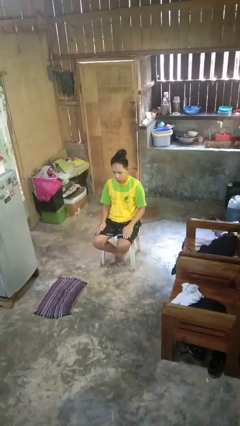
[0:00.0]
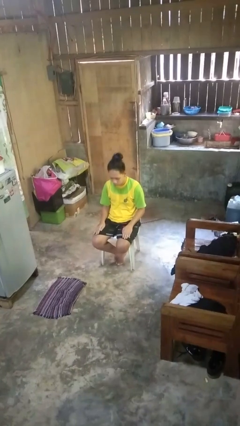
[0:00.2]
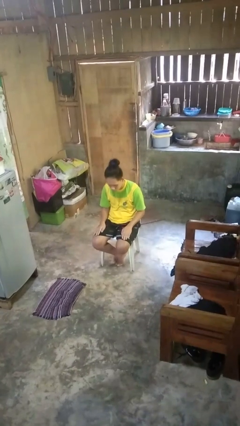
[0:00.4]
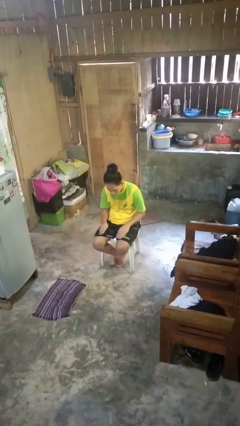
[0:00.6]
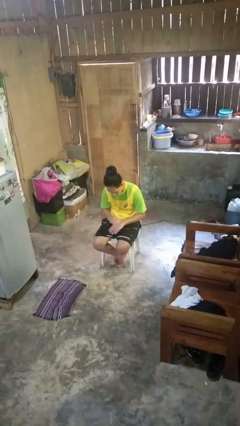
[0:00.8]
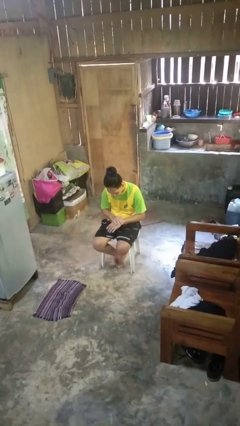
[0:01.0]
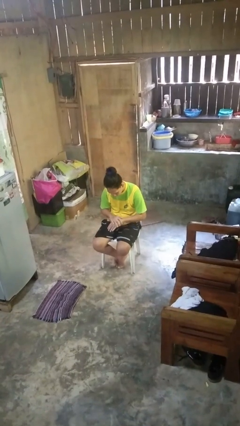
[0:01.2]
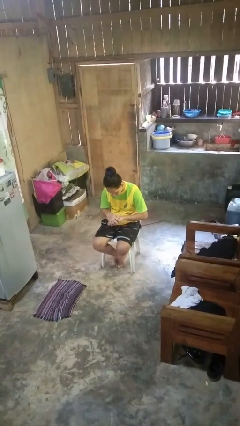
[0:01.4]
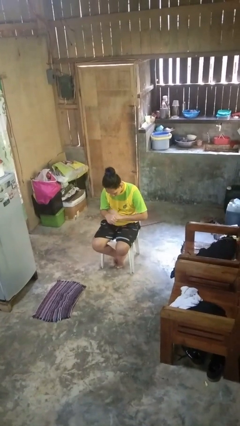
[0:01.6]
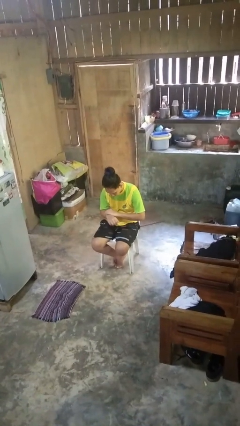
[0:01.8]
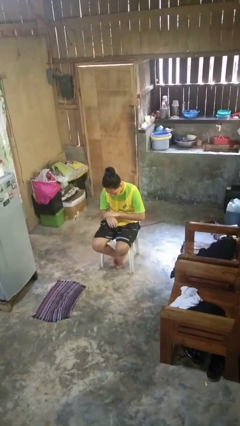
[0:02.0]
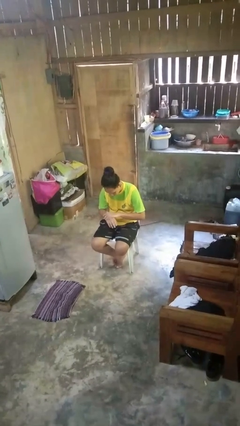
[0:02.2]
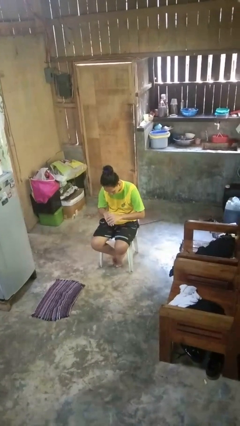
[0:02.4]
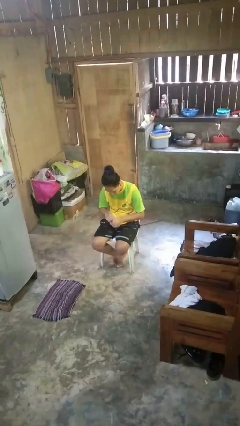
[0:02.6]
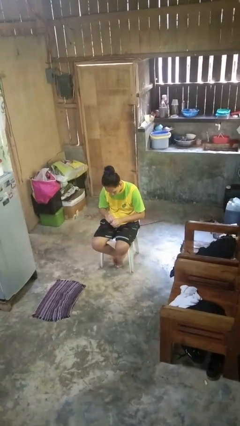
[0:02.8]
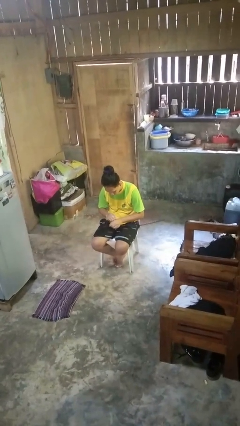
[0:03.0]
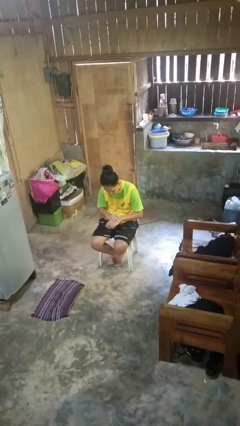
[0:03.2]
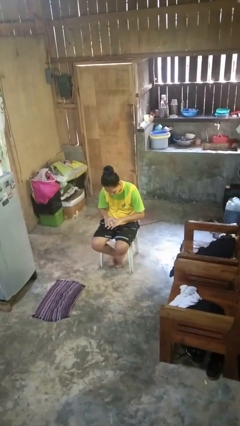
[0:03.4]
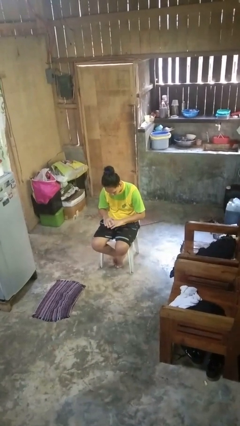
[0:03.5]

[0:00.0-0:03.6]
person looks at hands in lap

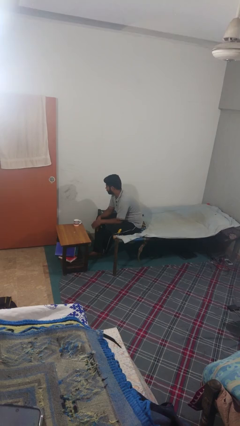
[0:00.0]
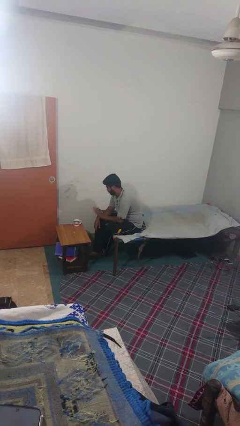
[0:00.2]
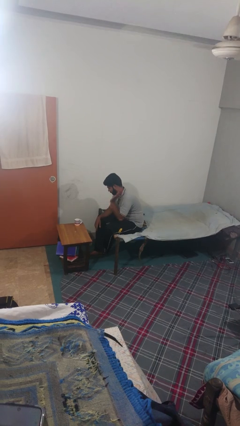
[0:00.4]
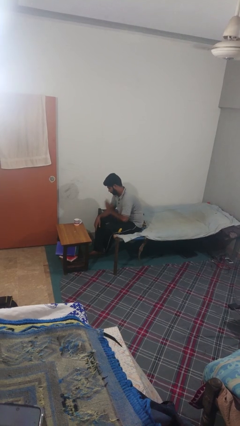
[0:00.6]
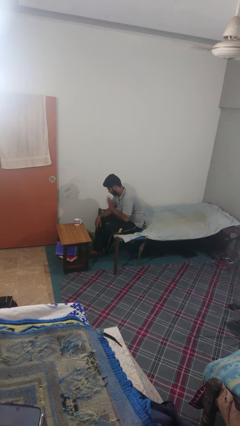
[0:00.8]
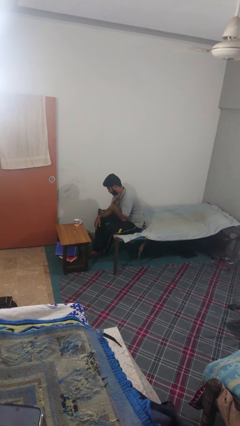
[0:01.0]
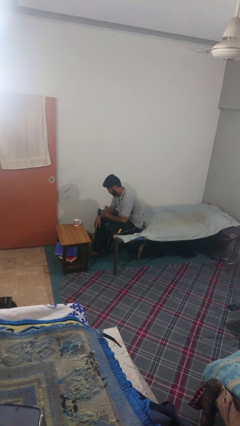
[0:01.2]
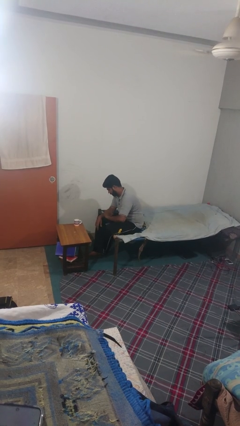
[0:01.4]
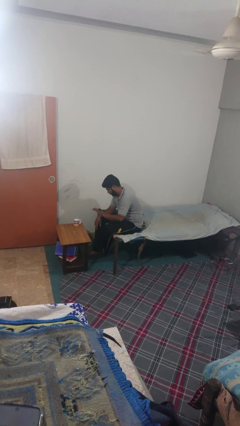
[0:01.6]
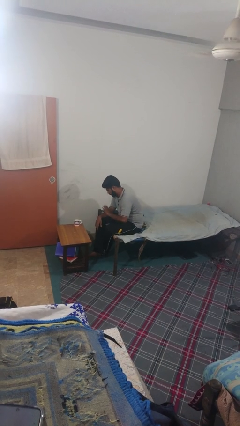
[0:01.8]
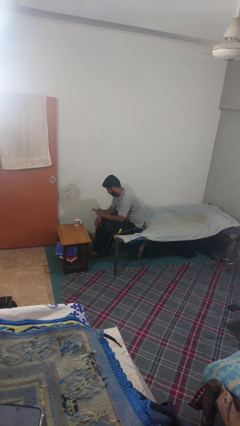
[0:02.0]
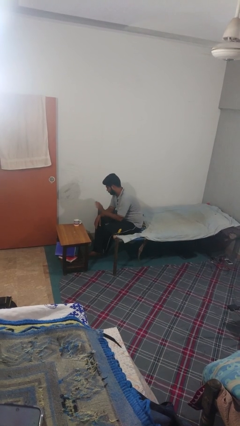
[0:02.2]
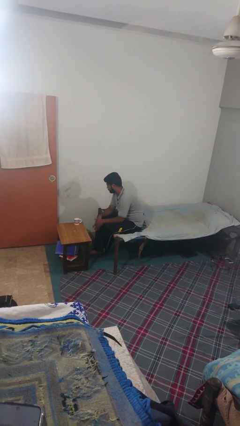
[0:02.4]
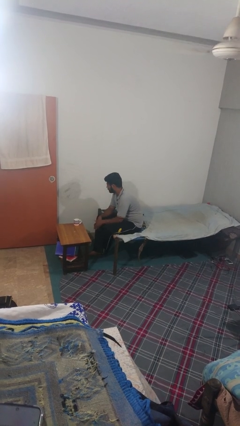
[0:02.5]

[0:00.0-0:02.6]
person swats bug

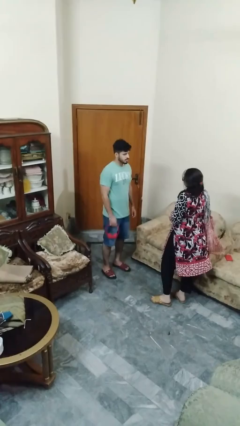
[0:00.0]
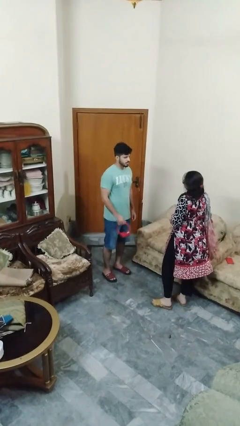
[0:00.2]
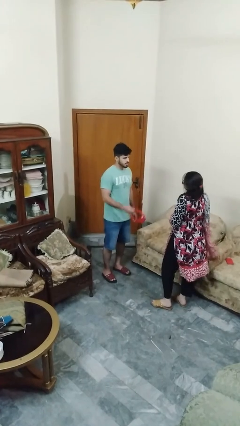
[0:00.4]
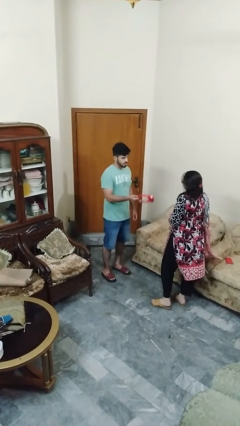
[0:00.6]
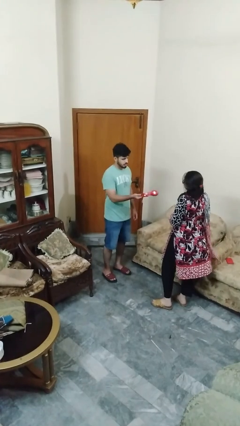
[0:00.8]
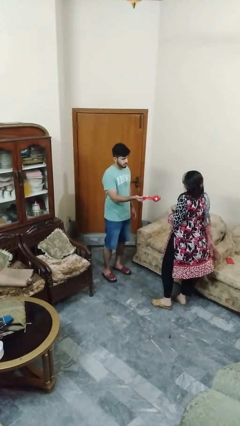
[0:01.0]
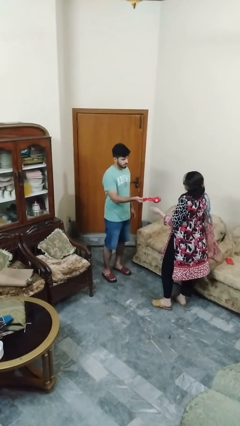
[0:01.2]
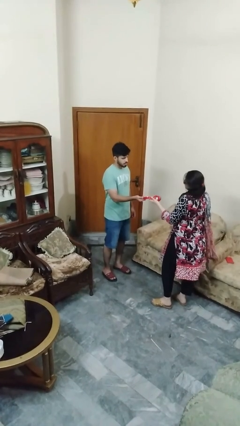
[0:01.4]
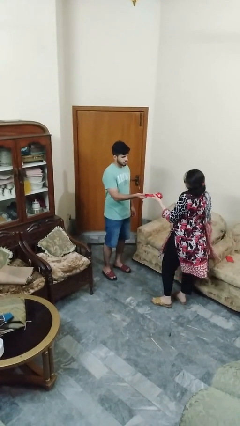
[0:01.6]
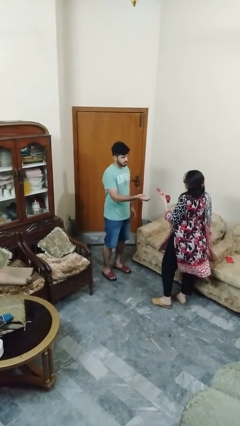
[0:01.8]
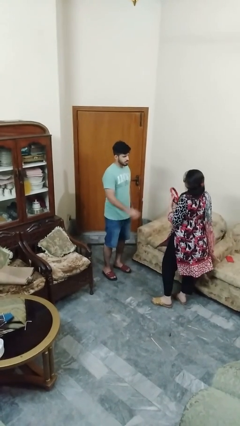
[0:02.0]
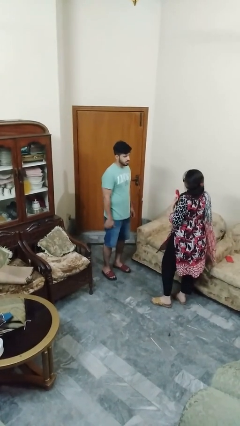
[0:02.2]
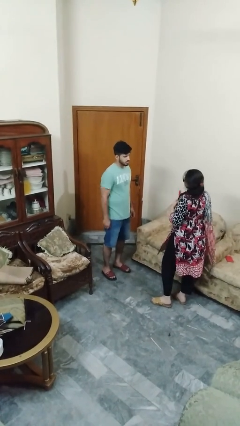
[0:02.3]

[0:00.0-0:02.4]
person transfers object to person

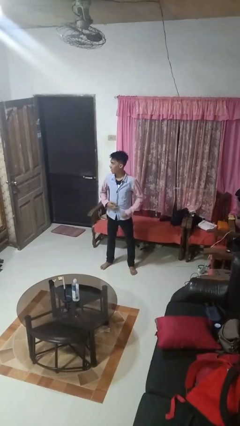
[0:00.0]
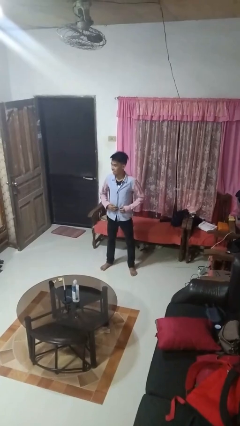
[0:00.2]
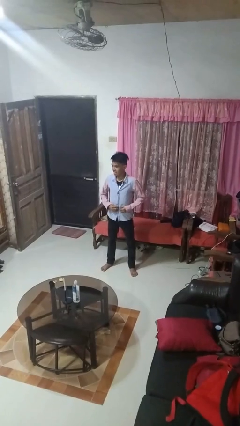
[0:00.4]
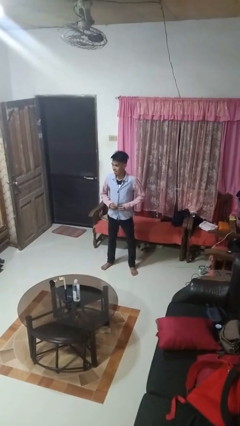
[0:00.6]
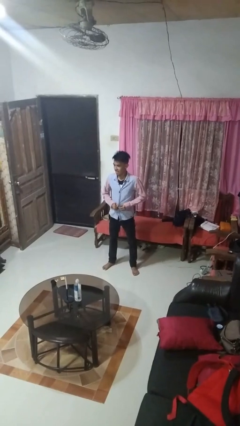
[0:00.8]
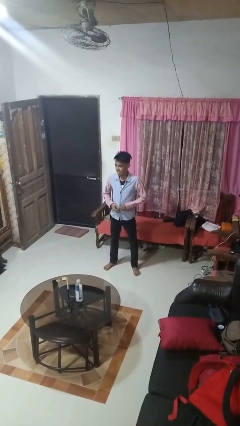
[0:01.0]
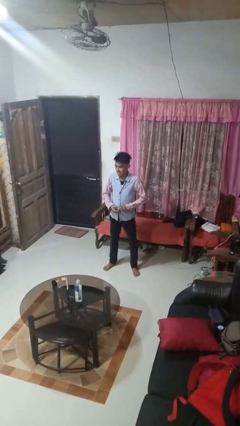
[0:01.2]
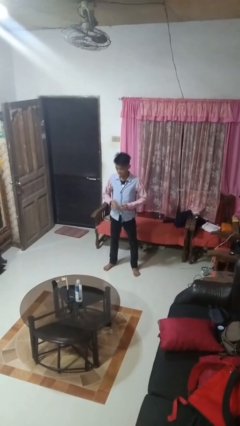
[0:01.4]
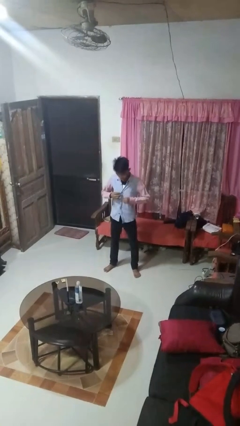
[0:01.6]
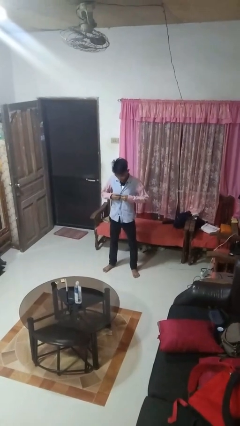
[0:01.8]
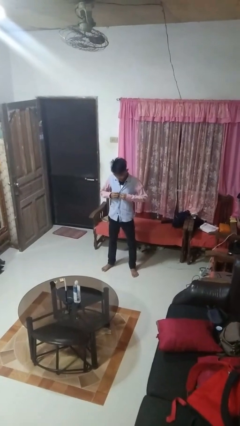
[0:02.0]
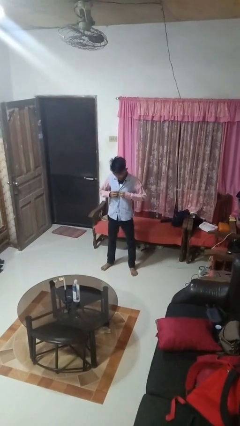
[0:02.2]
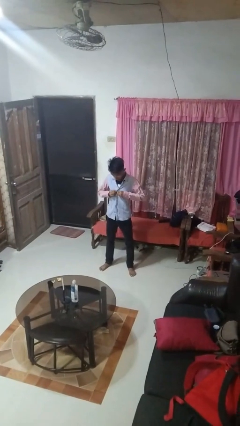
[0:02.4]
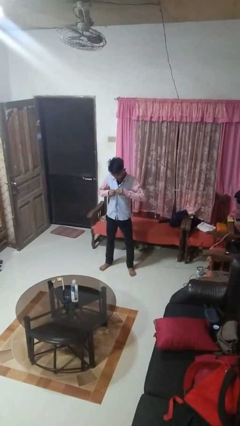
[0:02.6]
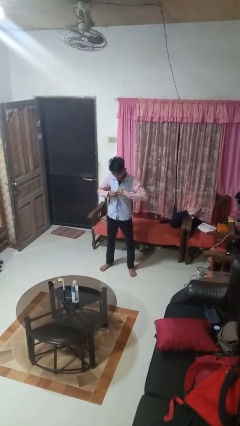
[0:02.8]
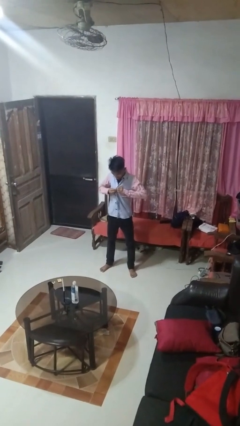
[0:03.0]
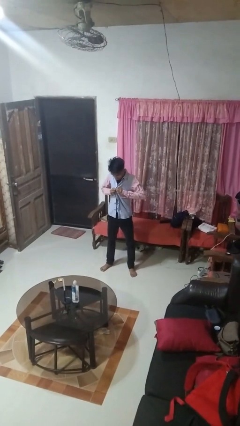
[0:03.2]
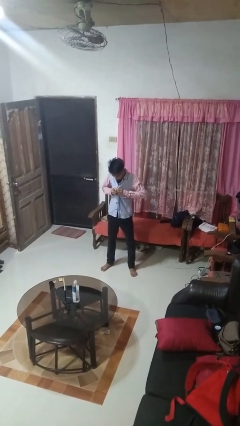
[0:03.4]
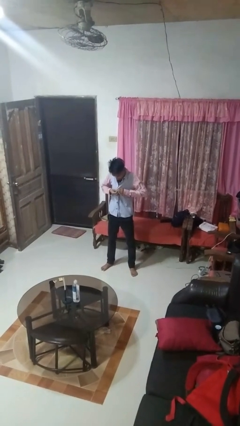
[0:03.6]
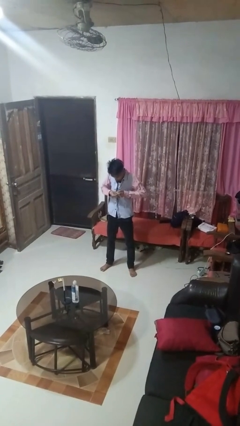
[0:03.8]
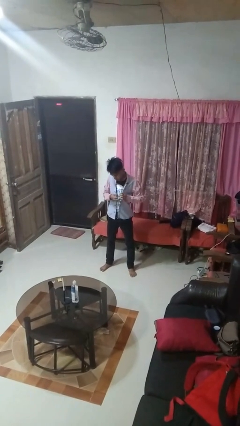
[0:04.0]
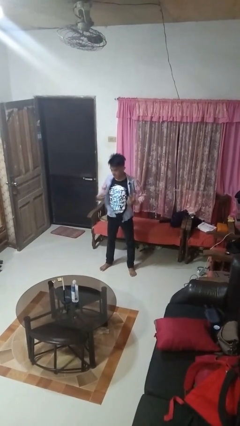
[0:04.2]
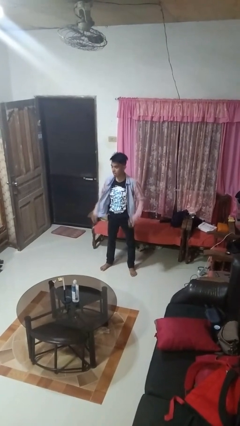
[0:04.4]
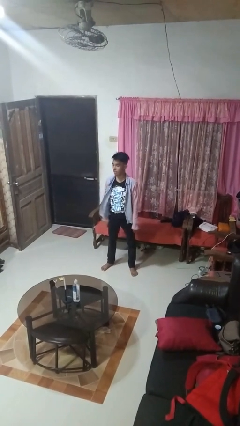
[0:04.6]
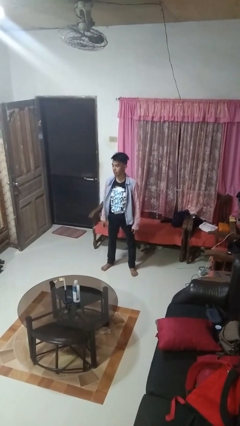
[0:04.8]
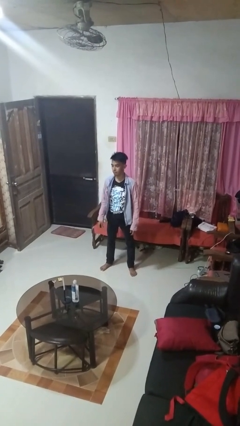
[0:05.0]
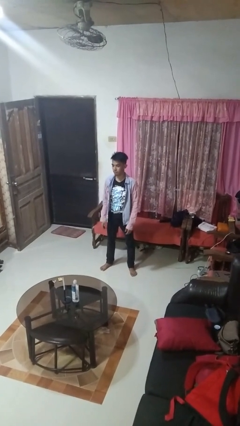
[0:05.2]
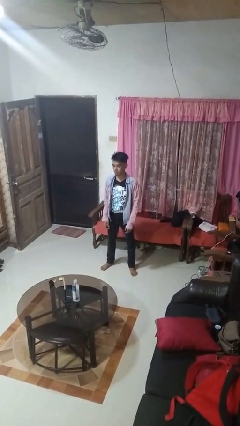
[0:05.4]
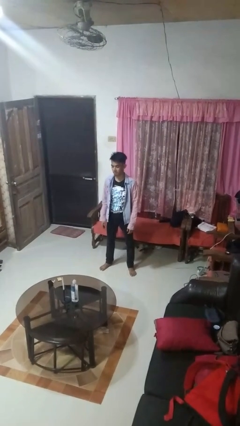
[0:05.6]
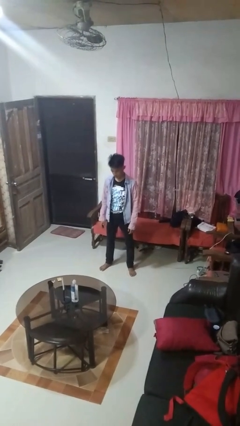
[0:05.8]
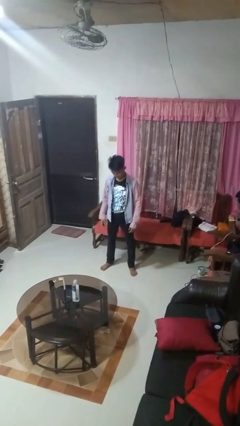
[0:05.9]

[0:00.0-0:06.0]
person unbuttons shirt

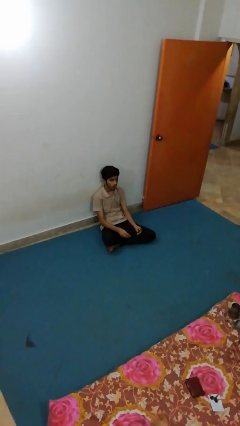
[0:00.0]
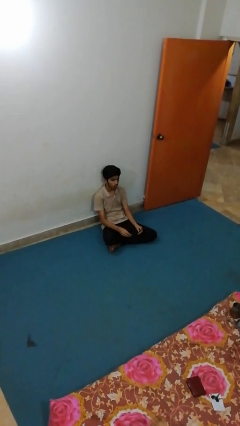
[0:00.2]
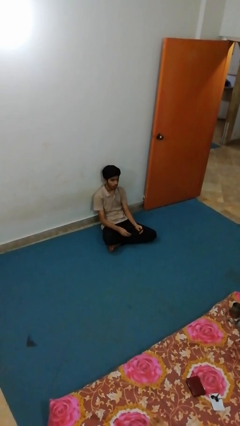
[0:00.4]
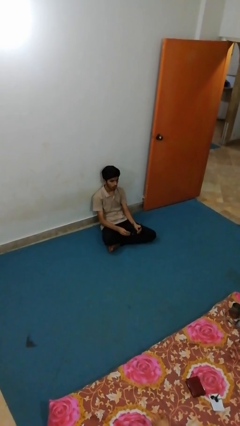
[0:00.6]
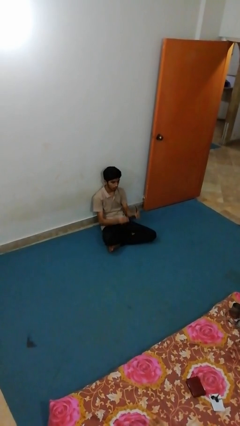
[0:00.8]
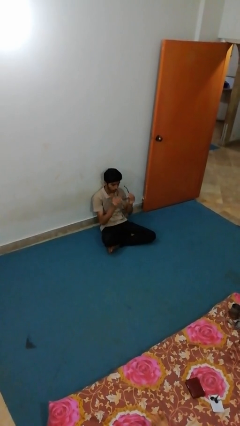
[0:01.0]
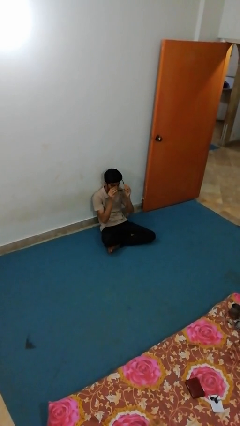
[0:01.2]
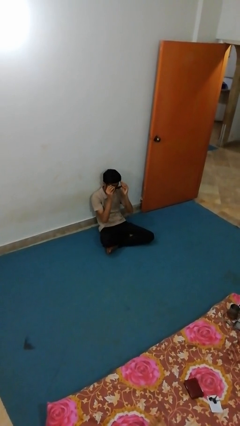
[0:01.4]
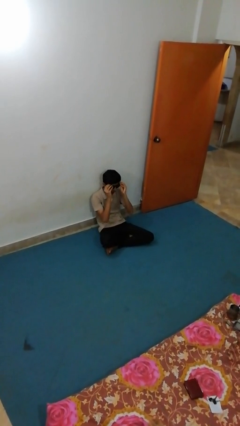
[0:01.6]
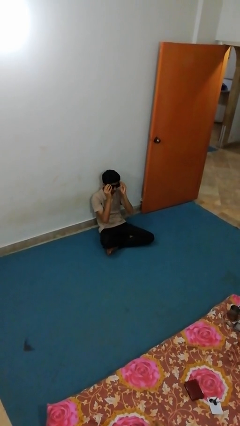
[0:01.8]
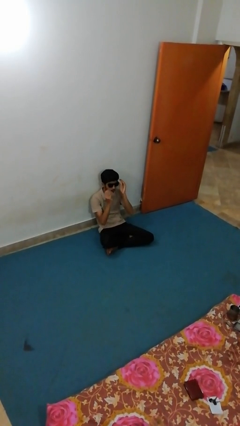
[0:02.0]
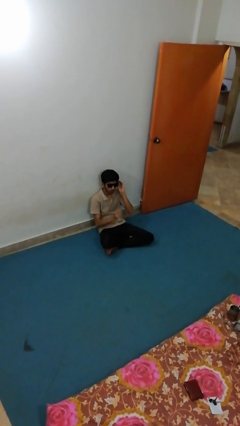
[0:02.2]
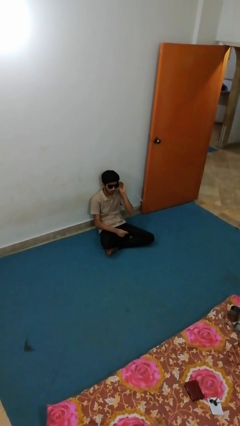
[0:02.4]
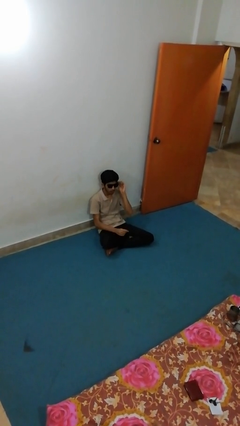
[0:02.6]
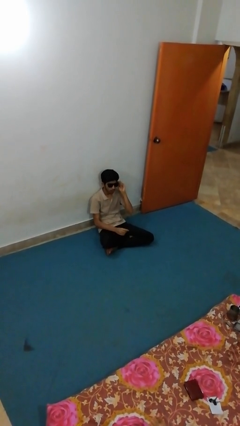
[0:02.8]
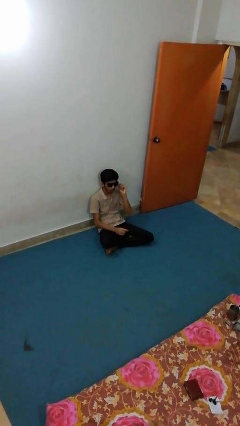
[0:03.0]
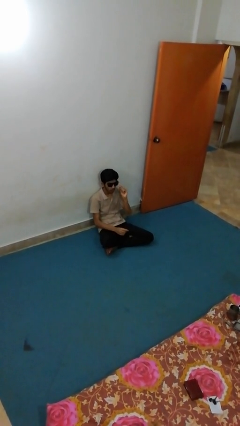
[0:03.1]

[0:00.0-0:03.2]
person puts on sunglasses
